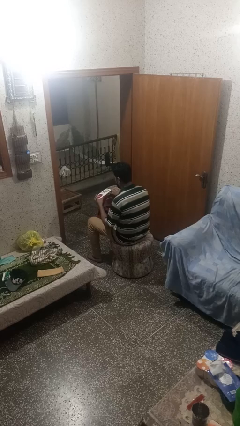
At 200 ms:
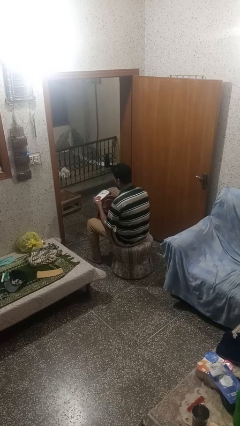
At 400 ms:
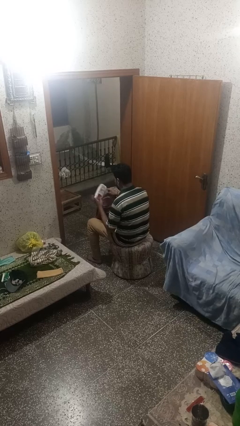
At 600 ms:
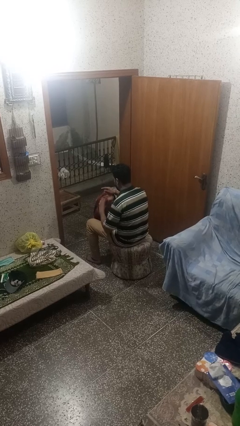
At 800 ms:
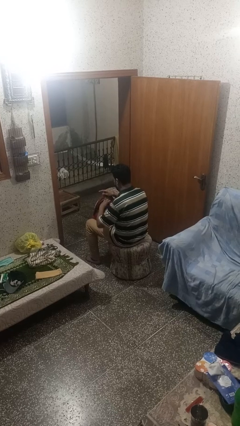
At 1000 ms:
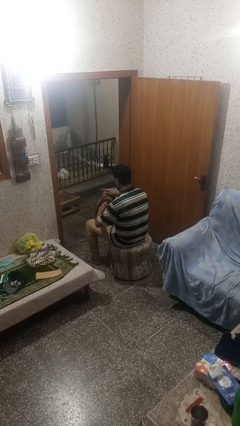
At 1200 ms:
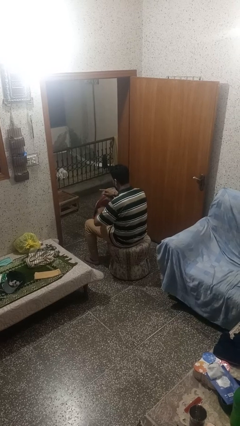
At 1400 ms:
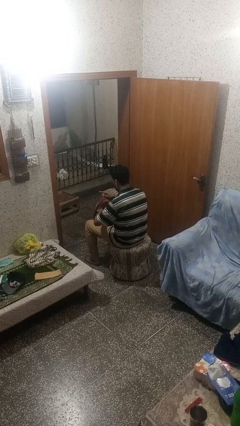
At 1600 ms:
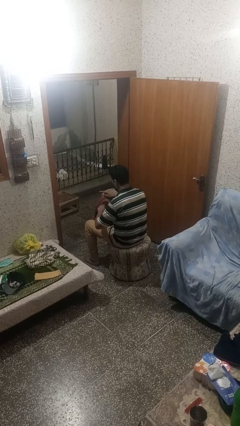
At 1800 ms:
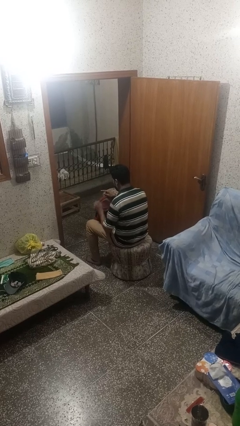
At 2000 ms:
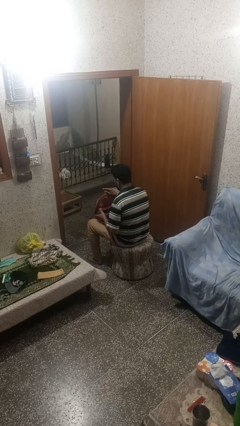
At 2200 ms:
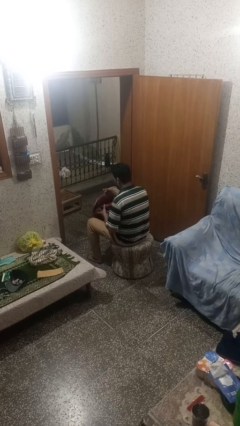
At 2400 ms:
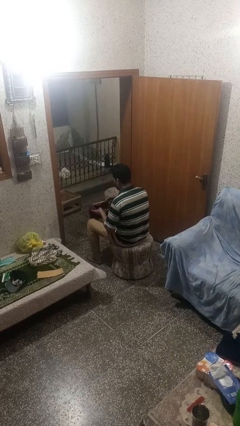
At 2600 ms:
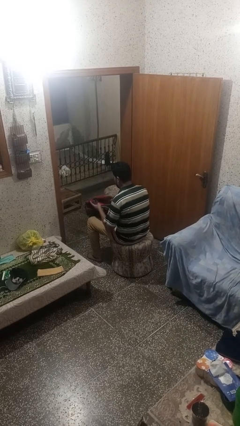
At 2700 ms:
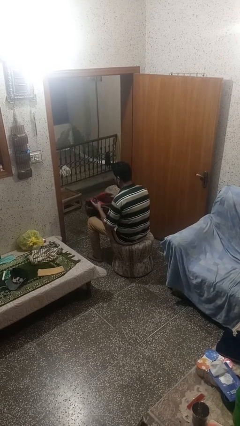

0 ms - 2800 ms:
person puts object into backpack

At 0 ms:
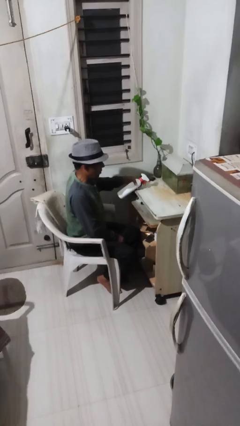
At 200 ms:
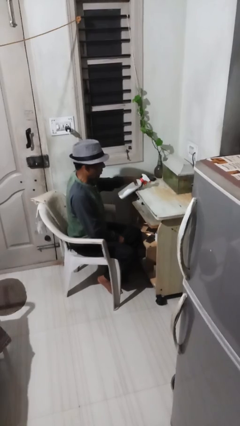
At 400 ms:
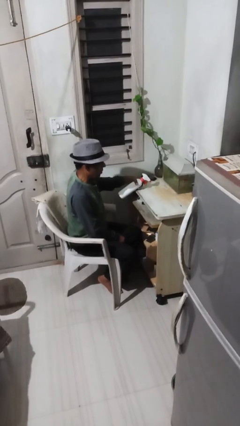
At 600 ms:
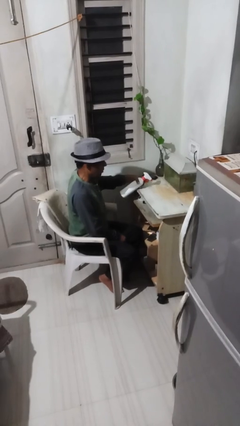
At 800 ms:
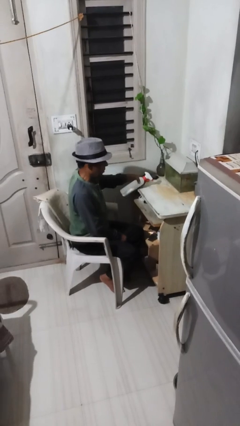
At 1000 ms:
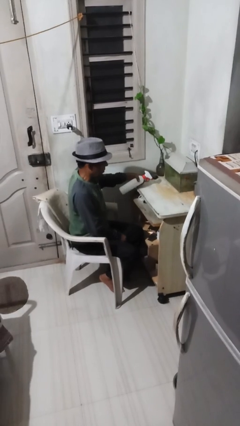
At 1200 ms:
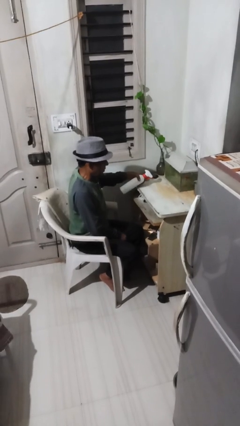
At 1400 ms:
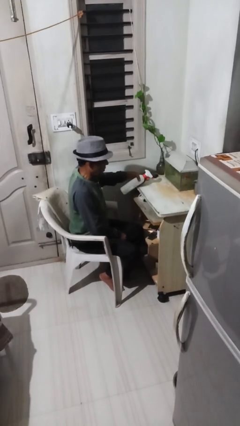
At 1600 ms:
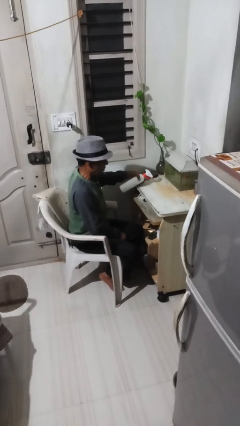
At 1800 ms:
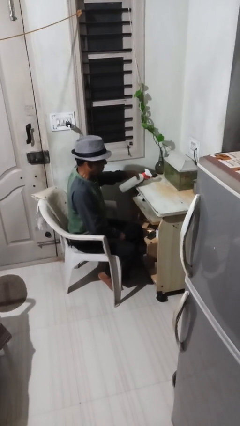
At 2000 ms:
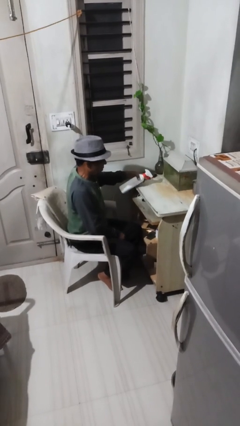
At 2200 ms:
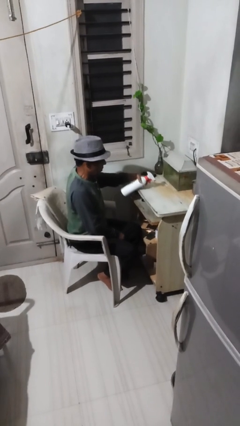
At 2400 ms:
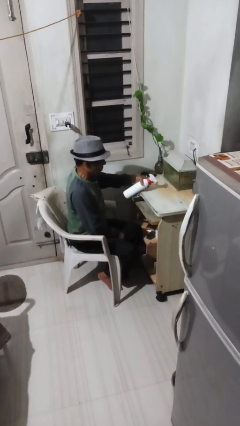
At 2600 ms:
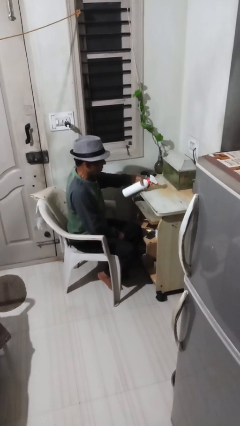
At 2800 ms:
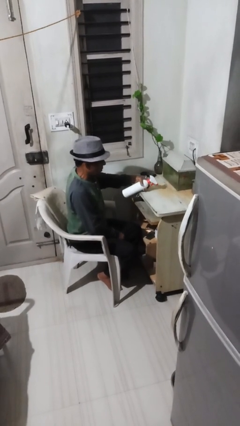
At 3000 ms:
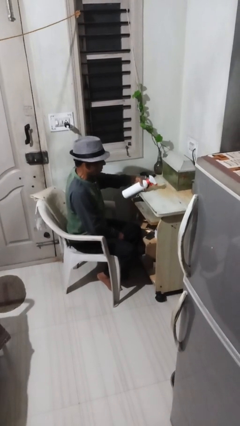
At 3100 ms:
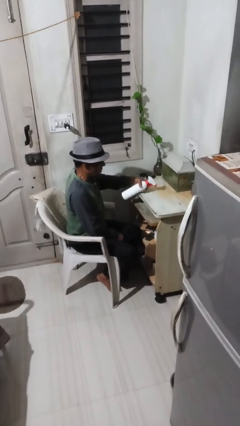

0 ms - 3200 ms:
person sprays from bottle

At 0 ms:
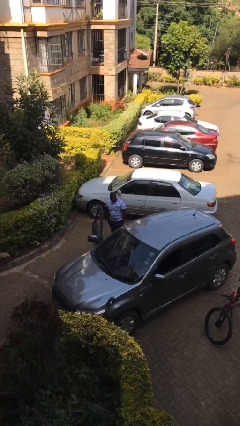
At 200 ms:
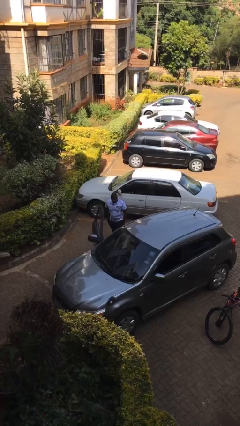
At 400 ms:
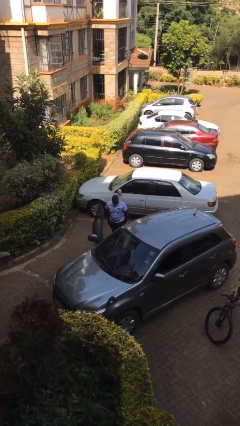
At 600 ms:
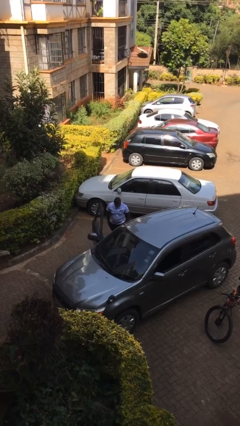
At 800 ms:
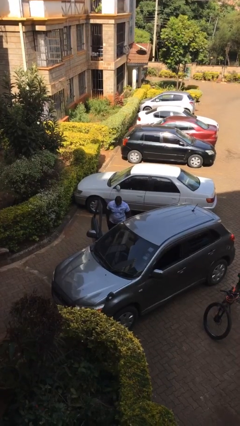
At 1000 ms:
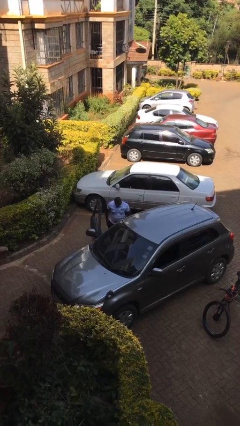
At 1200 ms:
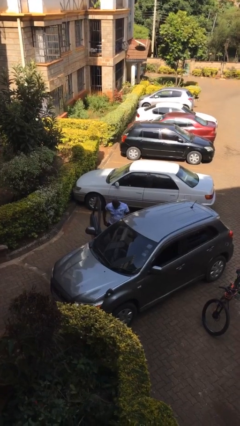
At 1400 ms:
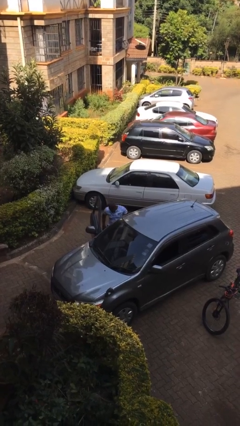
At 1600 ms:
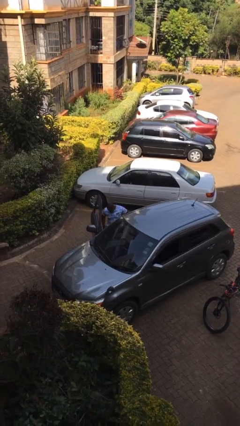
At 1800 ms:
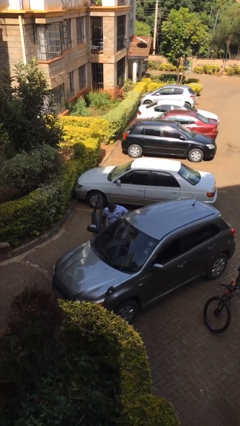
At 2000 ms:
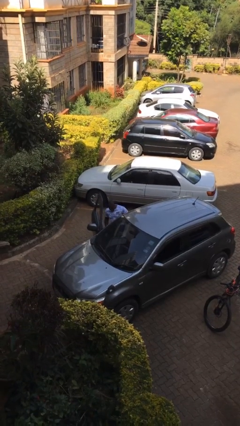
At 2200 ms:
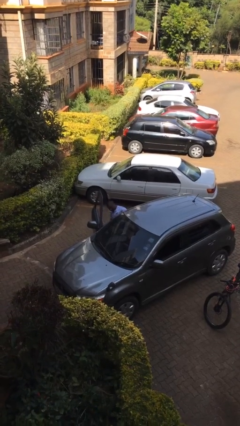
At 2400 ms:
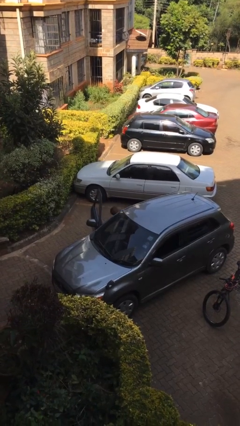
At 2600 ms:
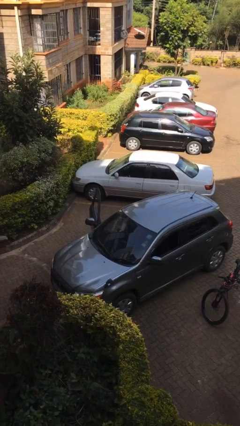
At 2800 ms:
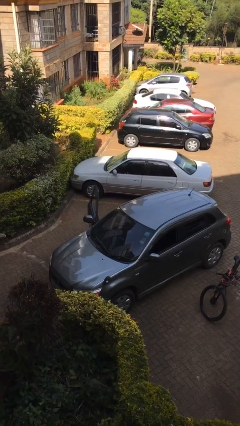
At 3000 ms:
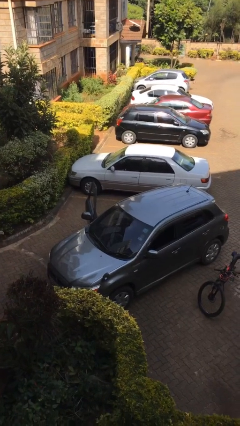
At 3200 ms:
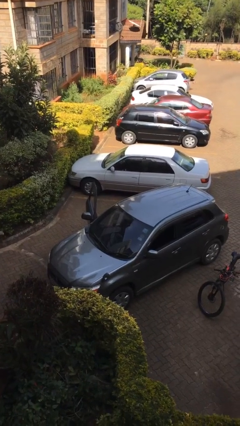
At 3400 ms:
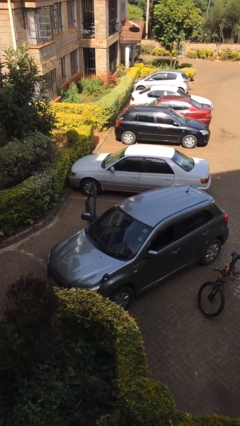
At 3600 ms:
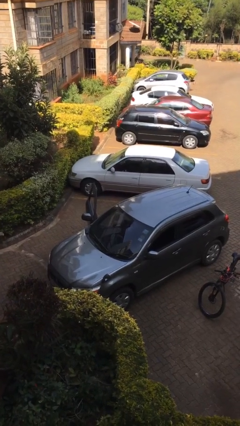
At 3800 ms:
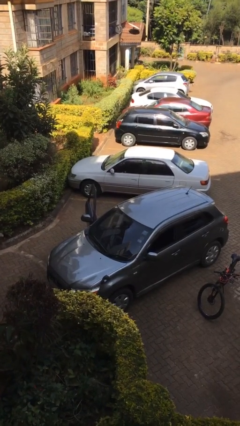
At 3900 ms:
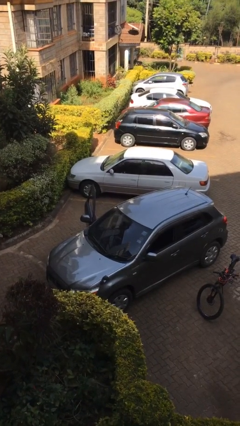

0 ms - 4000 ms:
person enters car

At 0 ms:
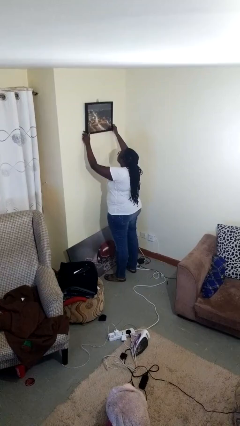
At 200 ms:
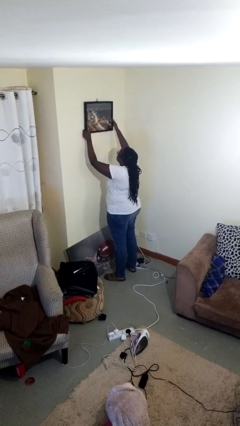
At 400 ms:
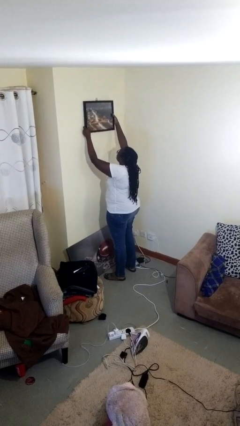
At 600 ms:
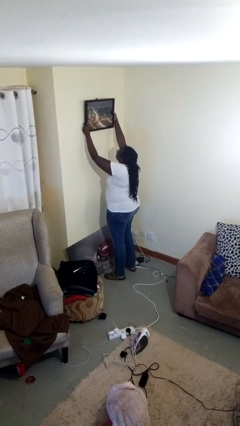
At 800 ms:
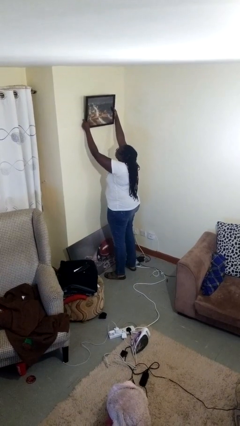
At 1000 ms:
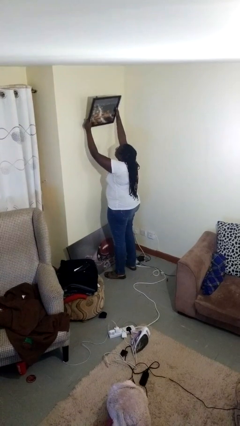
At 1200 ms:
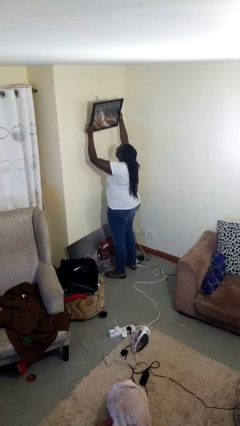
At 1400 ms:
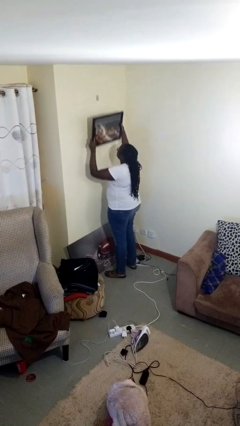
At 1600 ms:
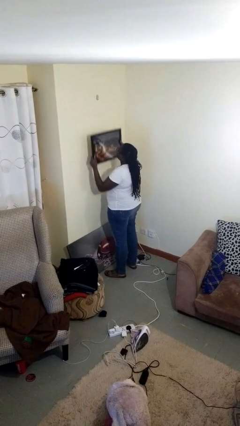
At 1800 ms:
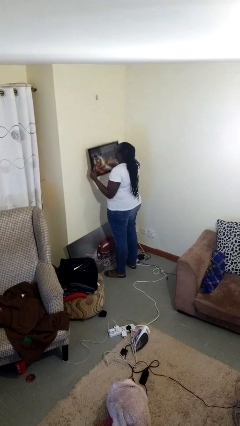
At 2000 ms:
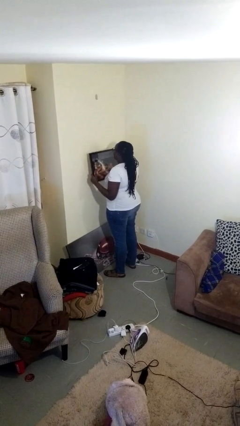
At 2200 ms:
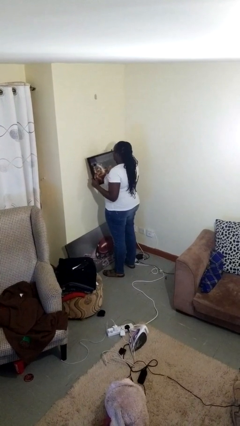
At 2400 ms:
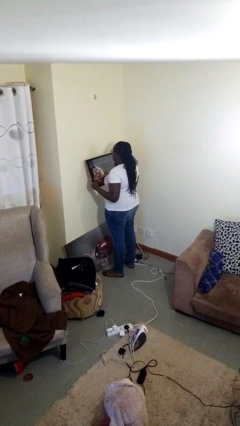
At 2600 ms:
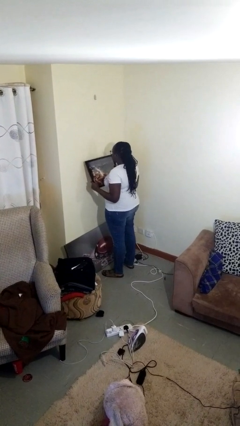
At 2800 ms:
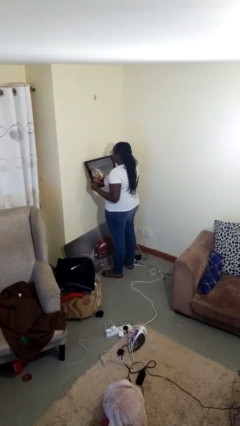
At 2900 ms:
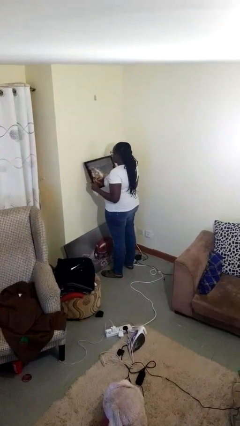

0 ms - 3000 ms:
person takes down picture frame

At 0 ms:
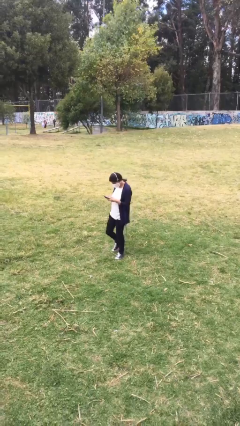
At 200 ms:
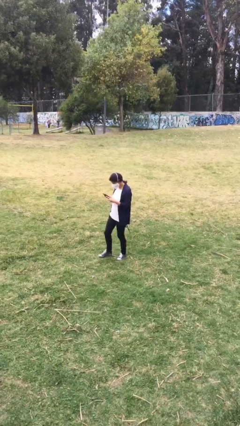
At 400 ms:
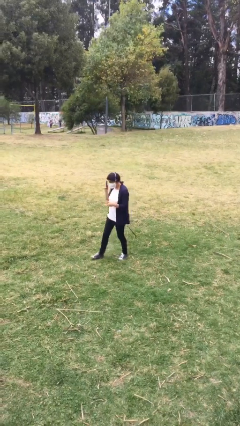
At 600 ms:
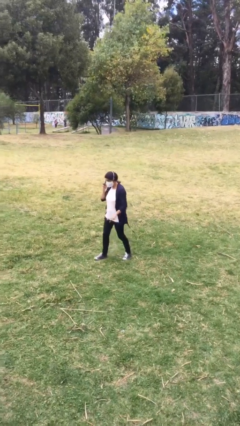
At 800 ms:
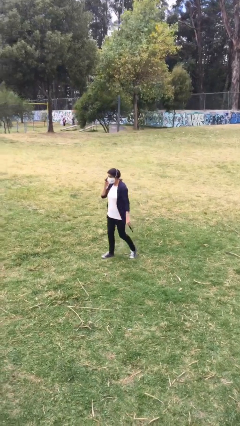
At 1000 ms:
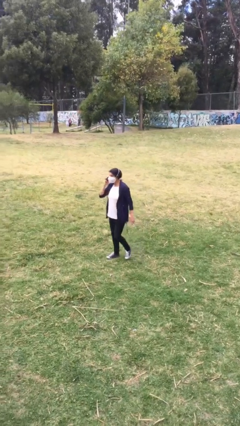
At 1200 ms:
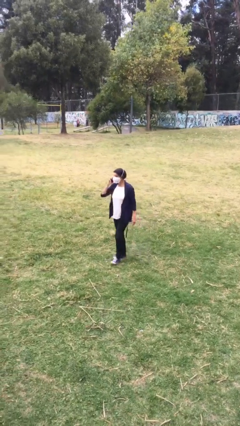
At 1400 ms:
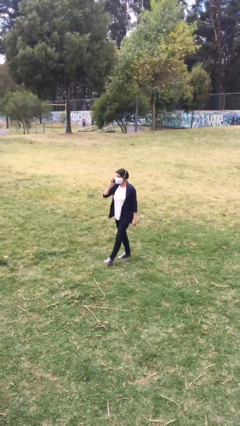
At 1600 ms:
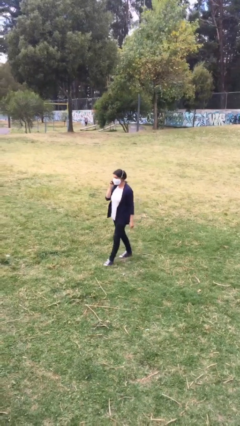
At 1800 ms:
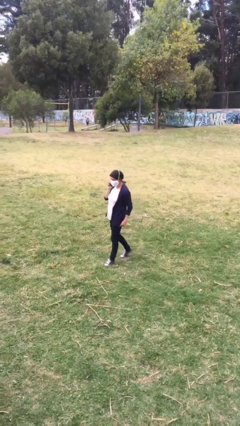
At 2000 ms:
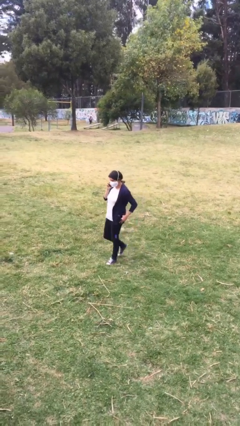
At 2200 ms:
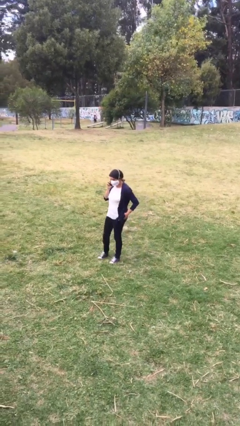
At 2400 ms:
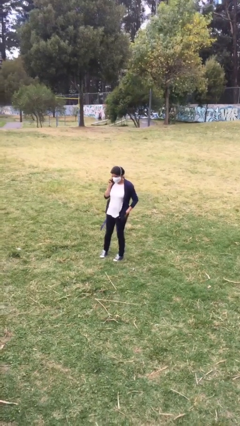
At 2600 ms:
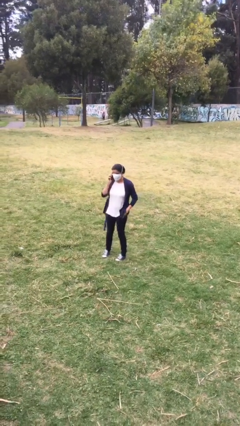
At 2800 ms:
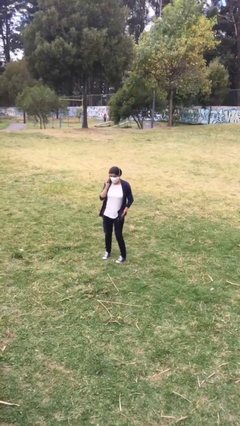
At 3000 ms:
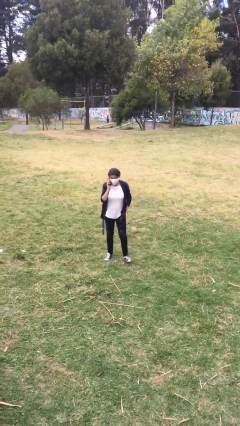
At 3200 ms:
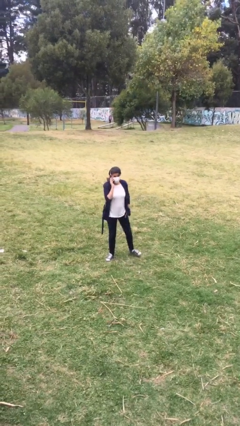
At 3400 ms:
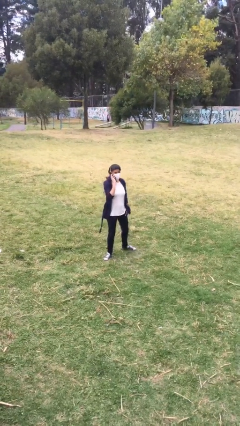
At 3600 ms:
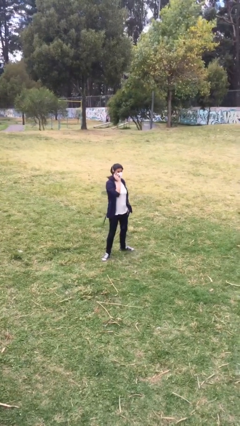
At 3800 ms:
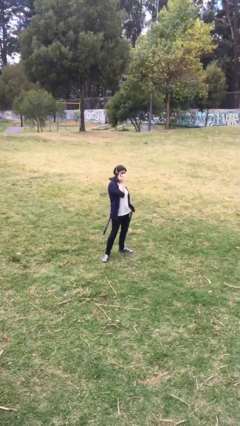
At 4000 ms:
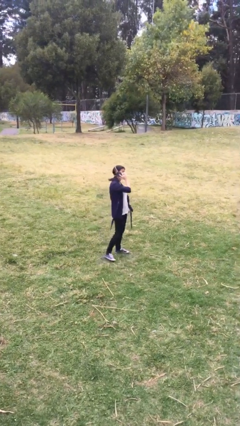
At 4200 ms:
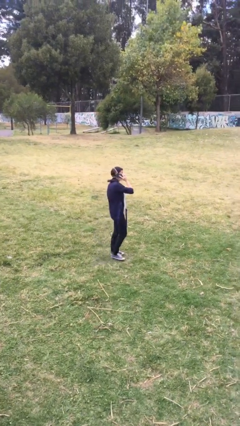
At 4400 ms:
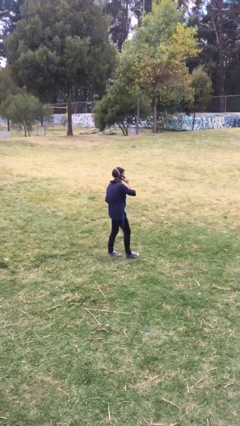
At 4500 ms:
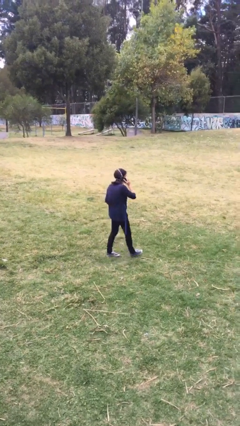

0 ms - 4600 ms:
person talks on phone
